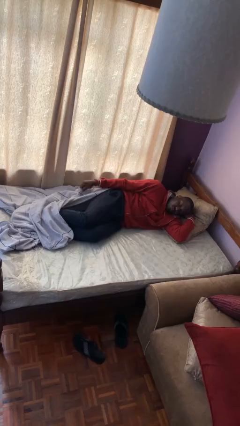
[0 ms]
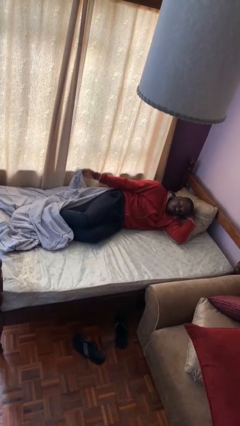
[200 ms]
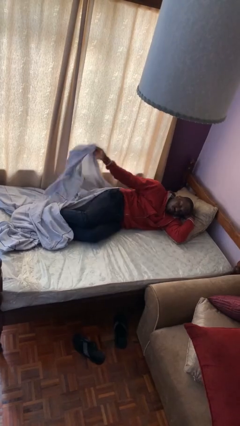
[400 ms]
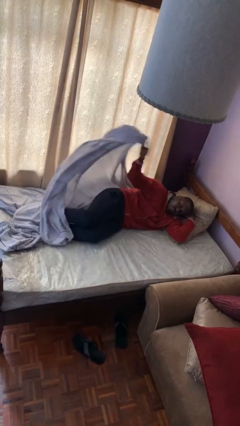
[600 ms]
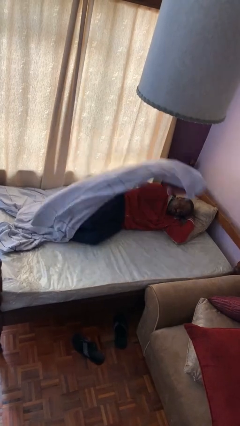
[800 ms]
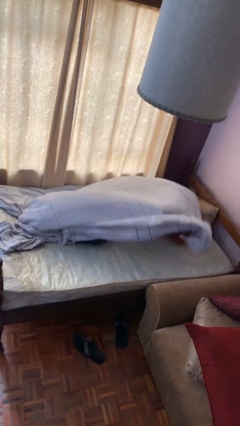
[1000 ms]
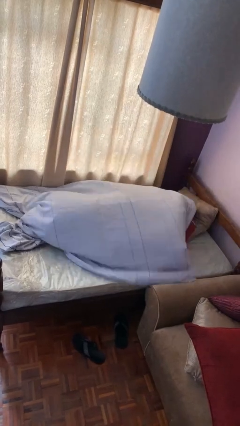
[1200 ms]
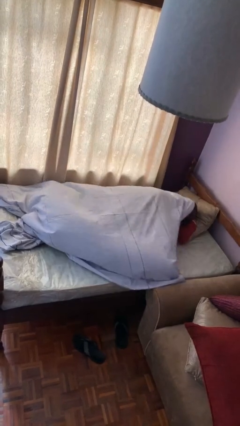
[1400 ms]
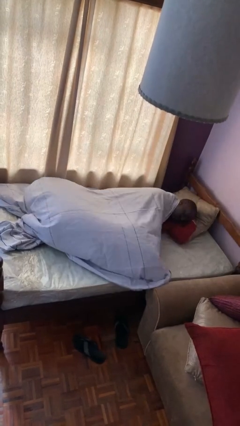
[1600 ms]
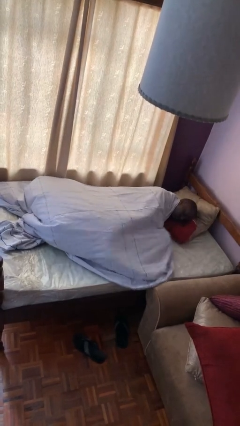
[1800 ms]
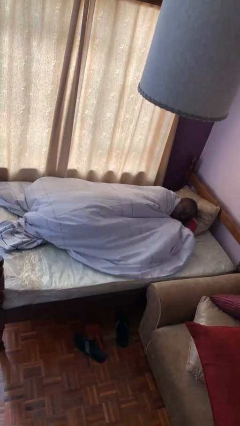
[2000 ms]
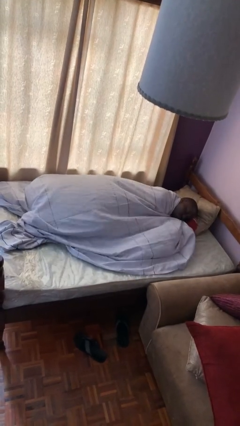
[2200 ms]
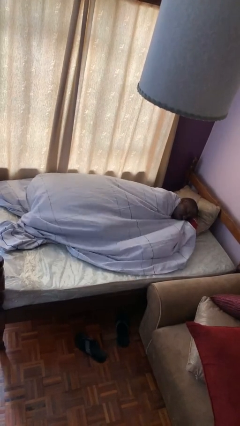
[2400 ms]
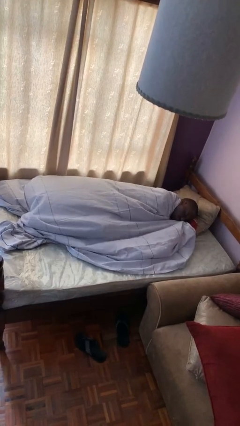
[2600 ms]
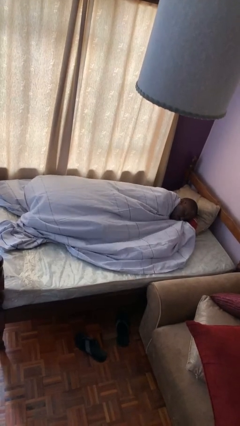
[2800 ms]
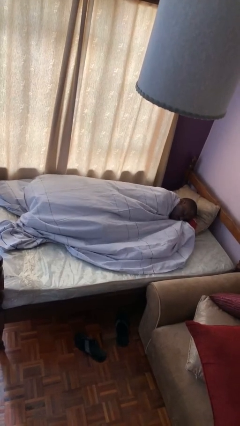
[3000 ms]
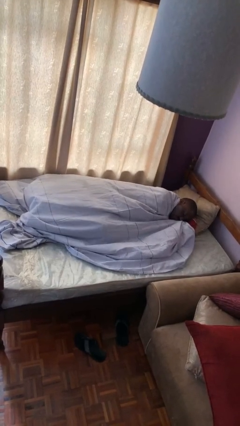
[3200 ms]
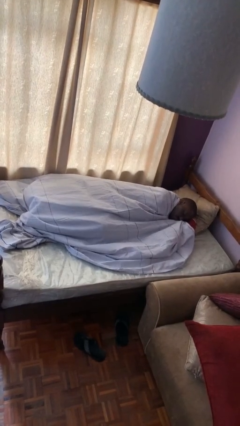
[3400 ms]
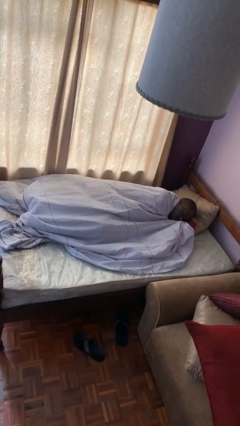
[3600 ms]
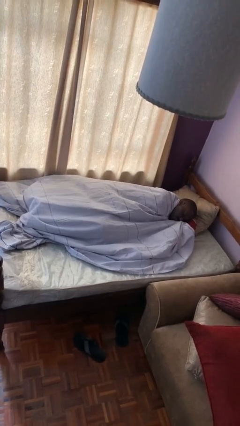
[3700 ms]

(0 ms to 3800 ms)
person covers with bedsheets

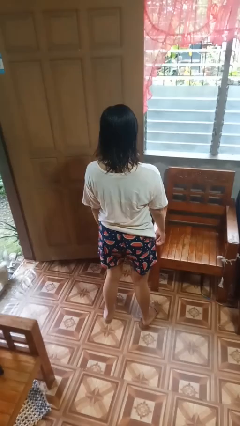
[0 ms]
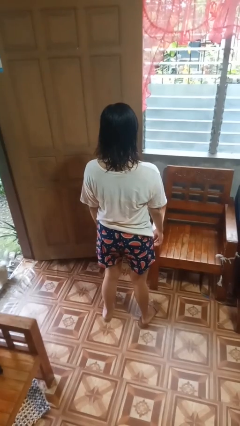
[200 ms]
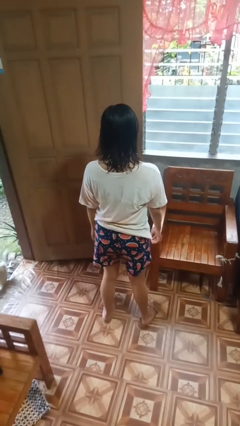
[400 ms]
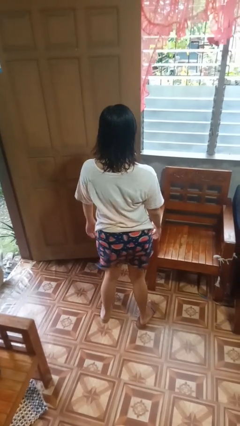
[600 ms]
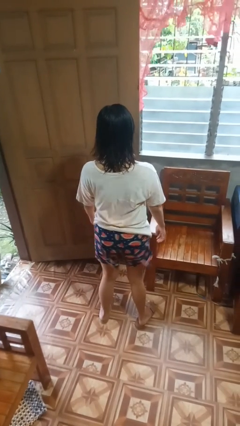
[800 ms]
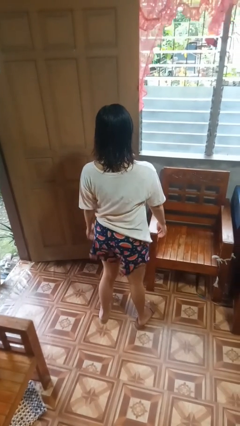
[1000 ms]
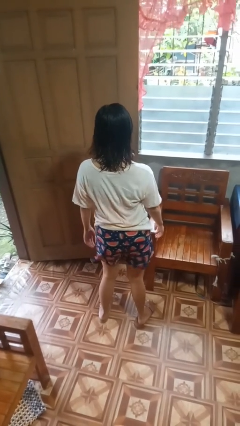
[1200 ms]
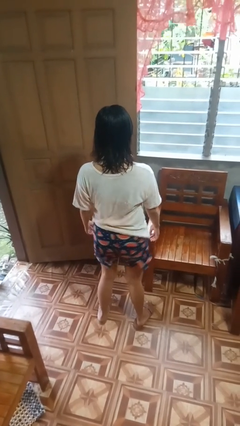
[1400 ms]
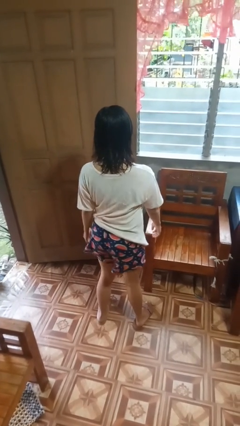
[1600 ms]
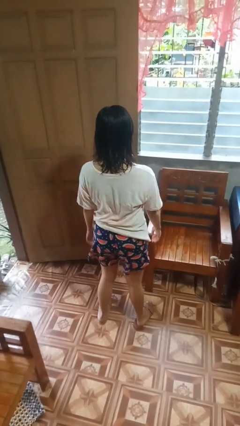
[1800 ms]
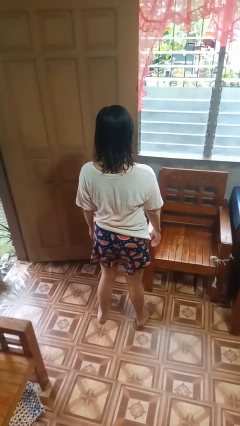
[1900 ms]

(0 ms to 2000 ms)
person wiggles hips

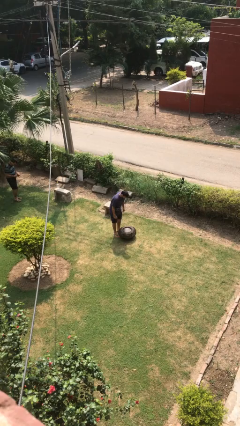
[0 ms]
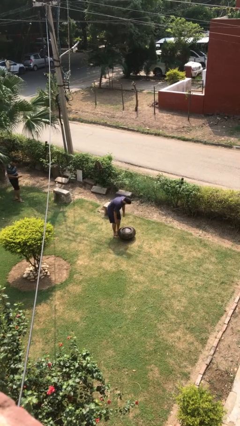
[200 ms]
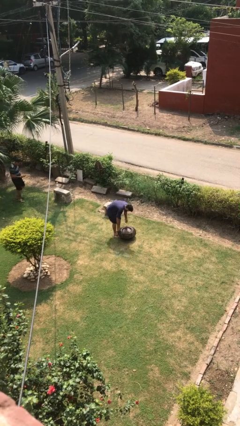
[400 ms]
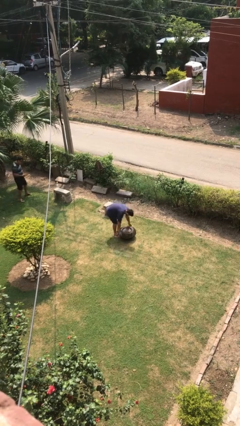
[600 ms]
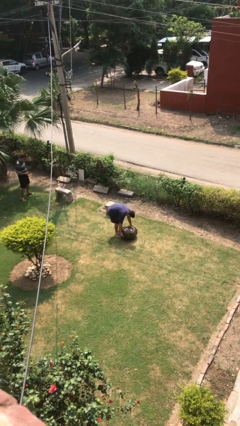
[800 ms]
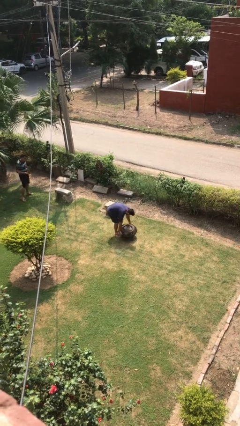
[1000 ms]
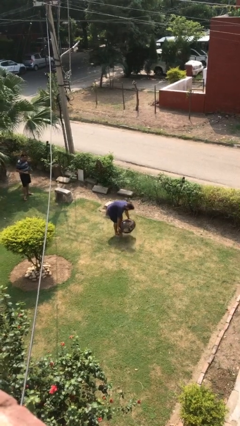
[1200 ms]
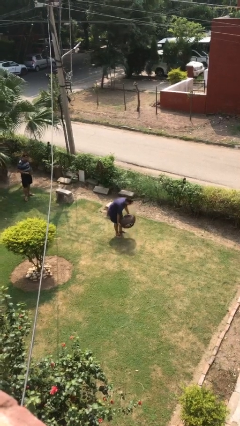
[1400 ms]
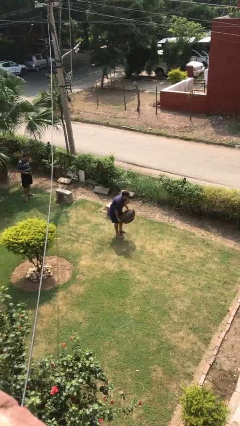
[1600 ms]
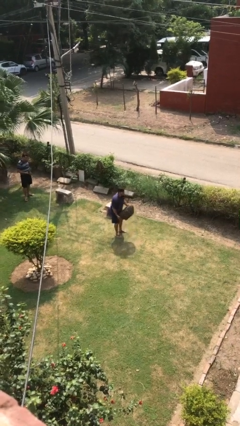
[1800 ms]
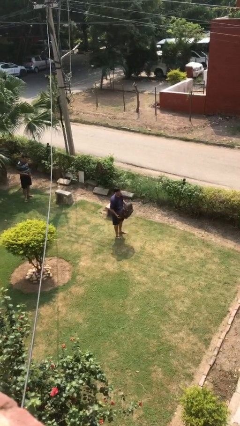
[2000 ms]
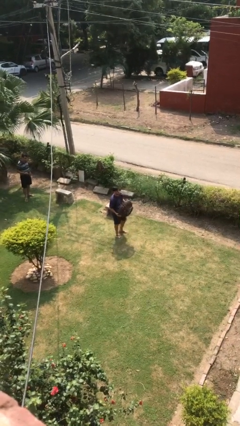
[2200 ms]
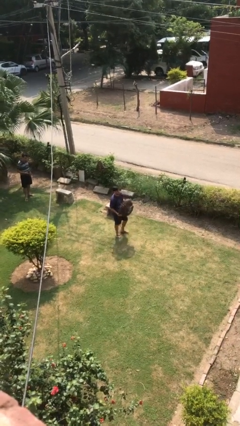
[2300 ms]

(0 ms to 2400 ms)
person picks up object from floor

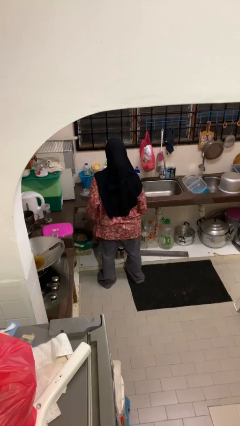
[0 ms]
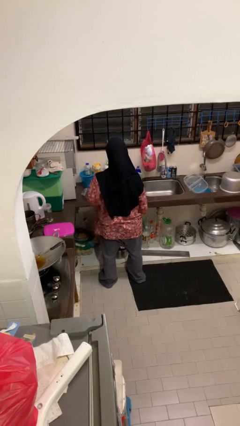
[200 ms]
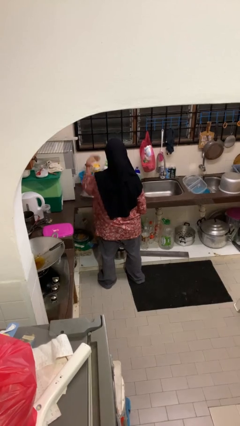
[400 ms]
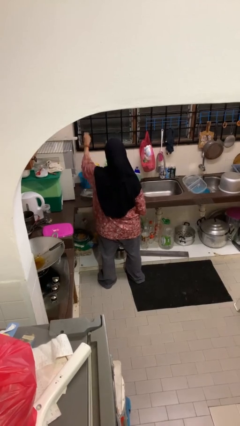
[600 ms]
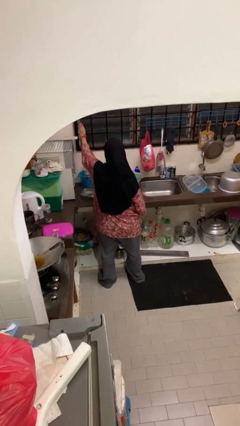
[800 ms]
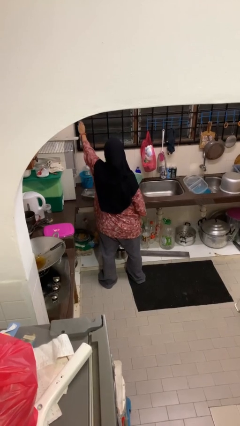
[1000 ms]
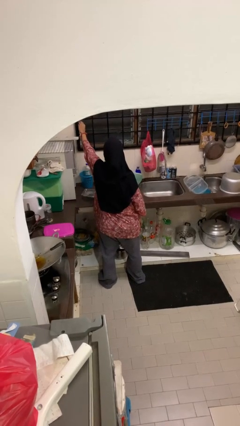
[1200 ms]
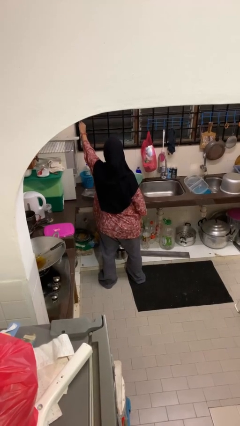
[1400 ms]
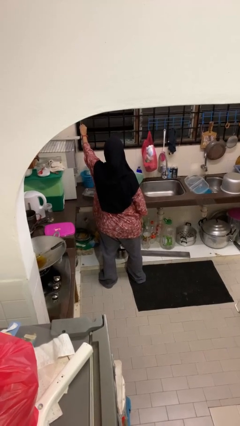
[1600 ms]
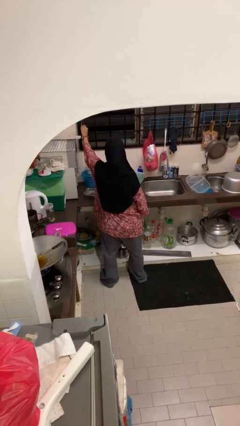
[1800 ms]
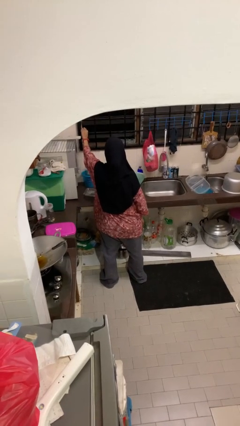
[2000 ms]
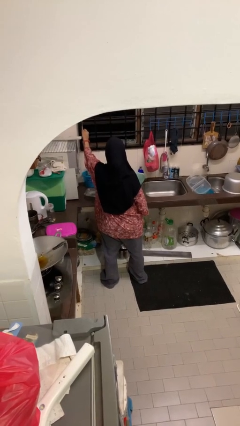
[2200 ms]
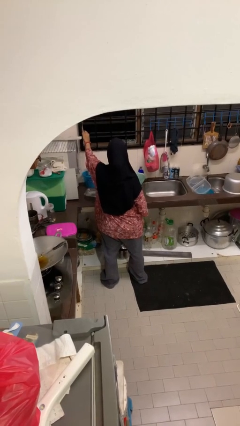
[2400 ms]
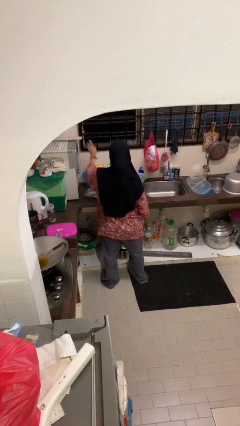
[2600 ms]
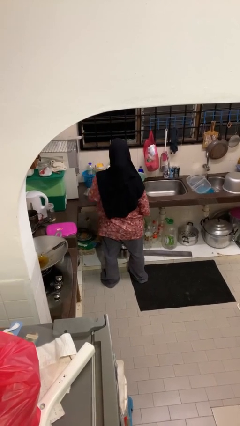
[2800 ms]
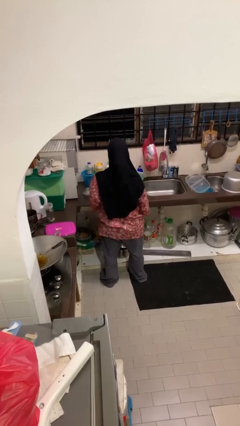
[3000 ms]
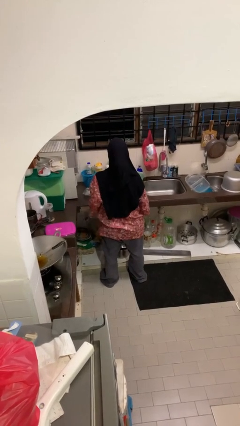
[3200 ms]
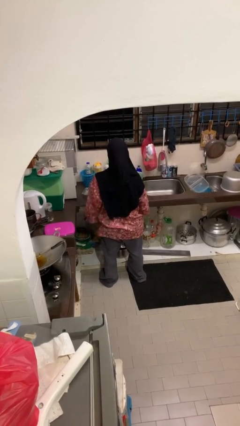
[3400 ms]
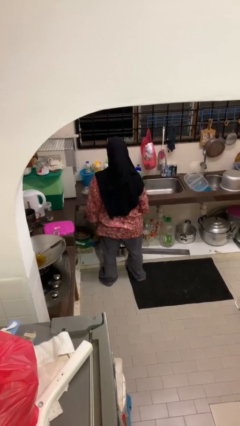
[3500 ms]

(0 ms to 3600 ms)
person opens home window

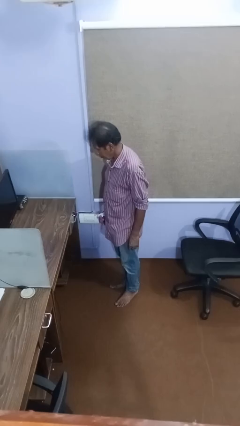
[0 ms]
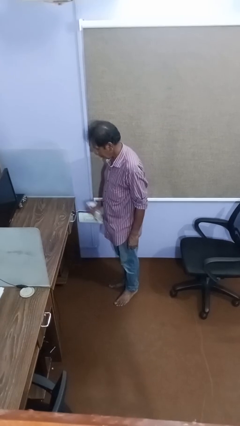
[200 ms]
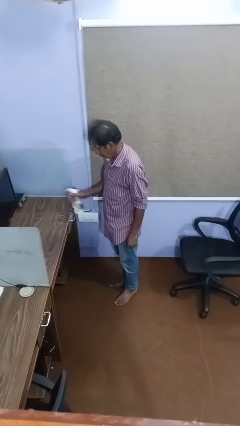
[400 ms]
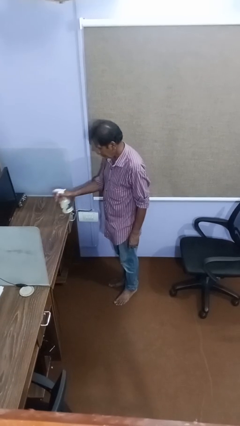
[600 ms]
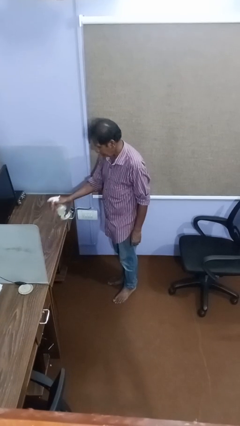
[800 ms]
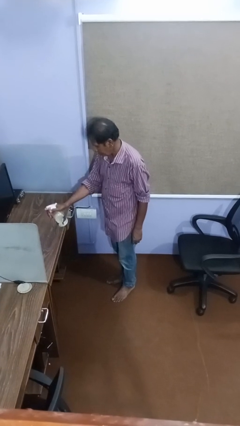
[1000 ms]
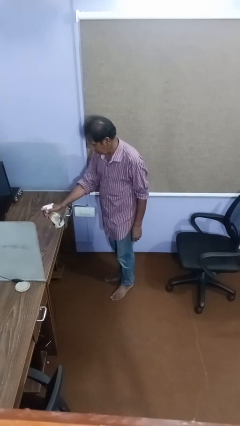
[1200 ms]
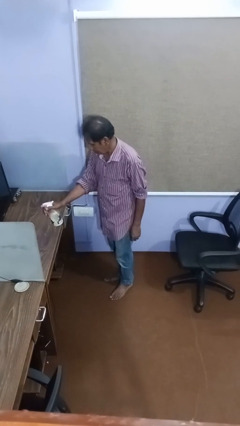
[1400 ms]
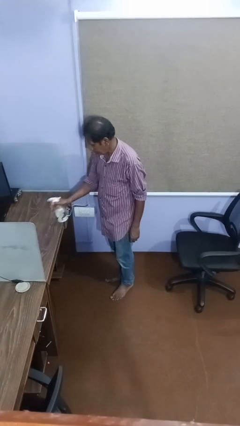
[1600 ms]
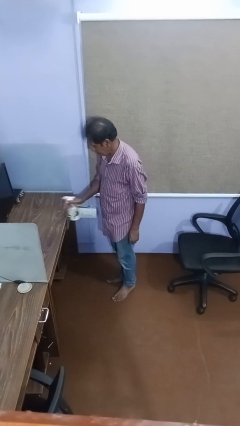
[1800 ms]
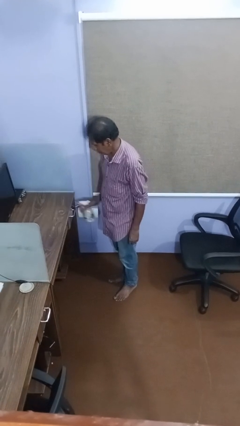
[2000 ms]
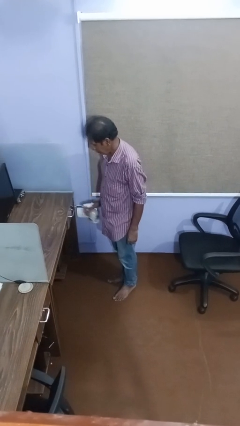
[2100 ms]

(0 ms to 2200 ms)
person sprays from bottle

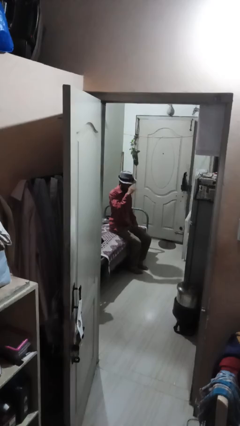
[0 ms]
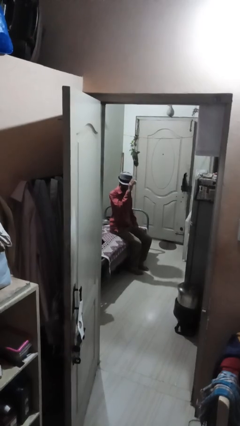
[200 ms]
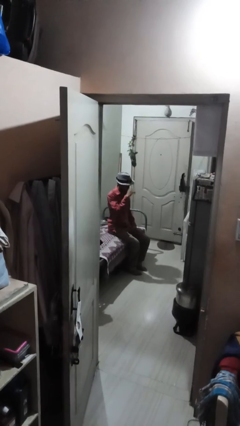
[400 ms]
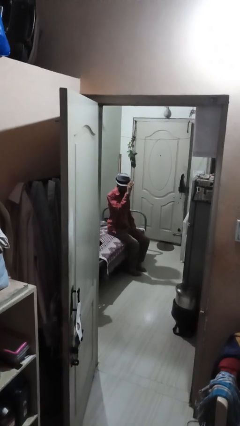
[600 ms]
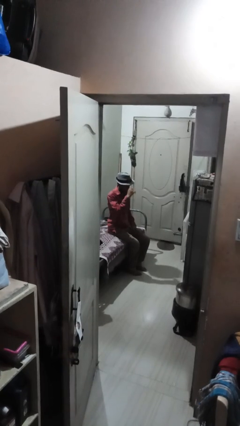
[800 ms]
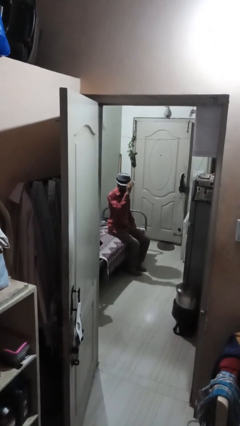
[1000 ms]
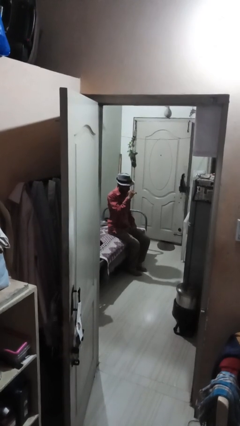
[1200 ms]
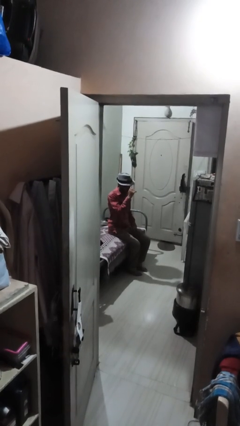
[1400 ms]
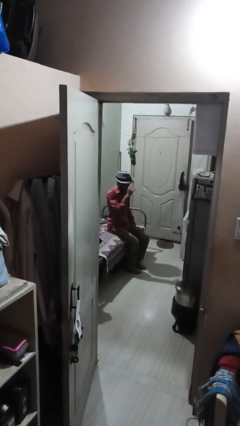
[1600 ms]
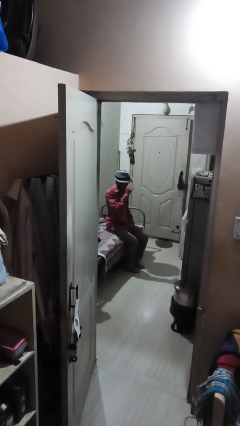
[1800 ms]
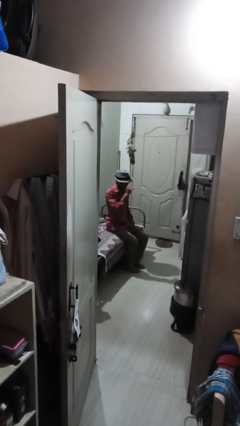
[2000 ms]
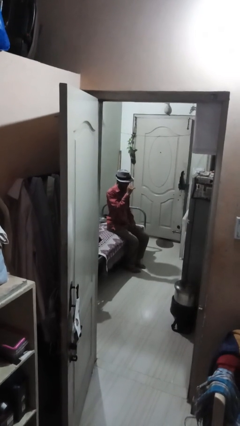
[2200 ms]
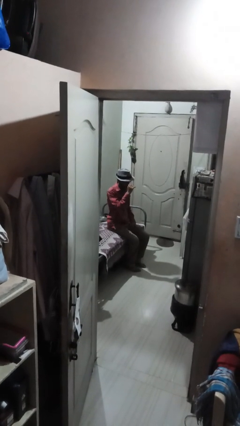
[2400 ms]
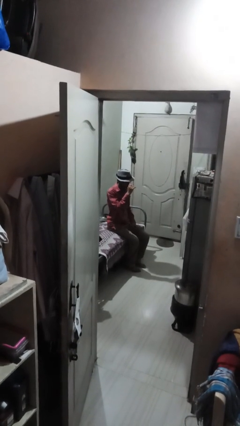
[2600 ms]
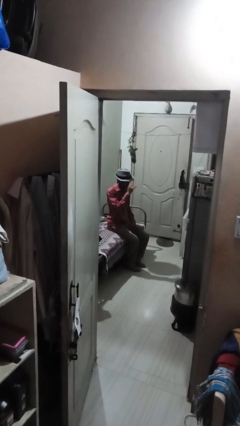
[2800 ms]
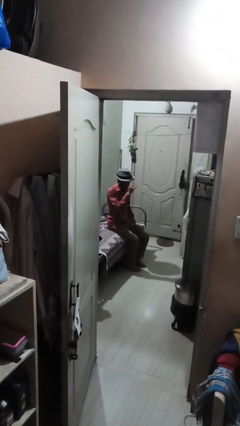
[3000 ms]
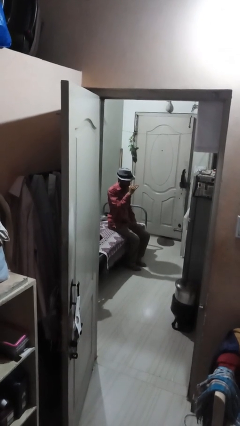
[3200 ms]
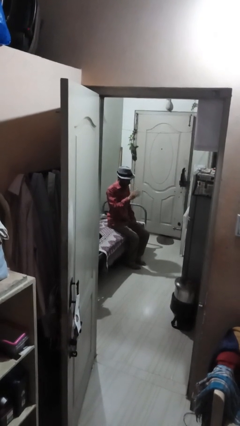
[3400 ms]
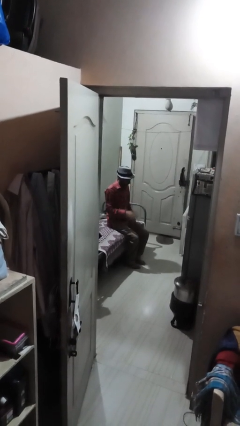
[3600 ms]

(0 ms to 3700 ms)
person gestures come here
